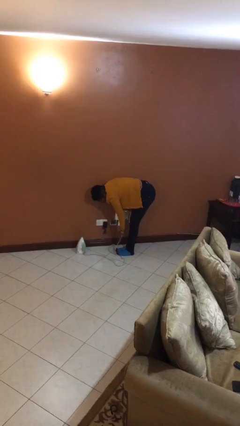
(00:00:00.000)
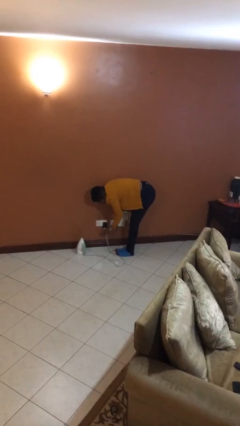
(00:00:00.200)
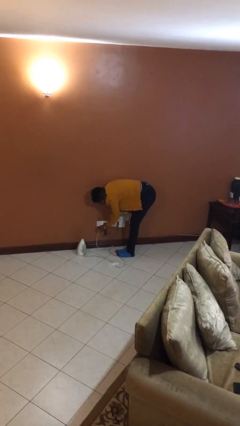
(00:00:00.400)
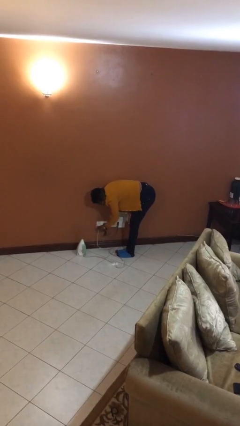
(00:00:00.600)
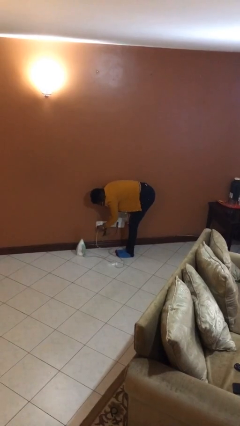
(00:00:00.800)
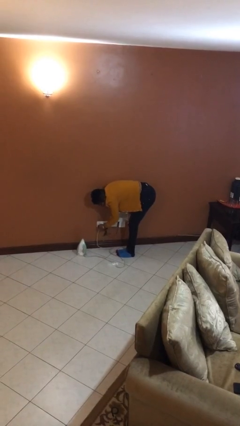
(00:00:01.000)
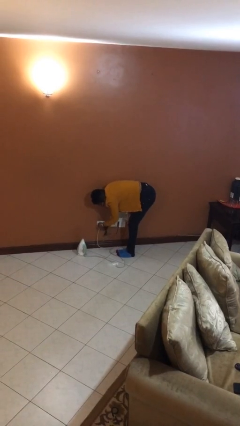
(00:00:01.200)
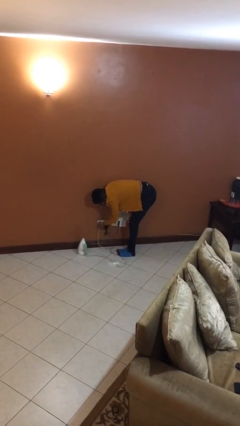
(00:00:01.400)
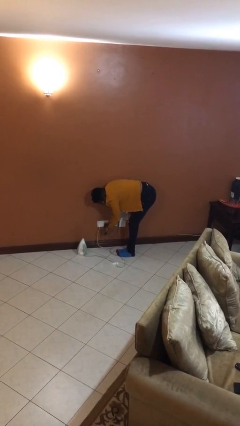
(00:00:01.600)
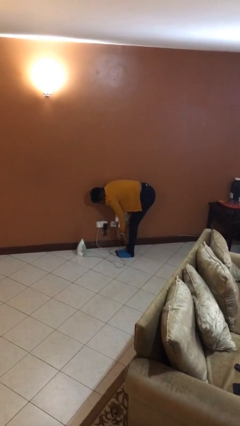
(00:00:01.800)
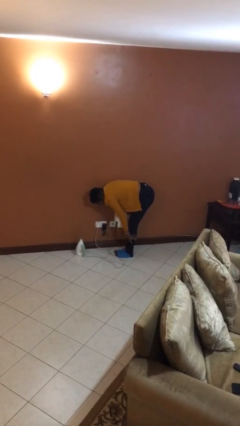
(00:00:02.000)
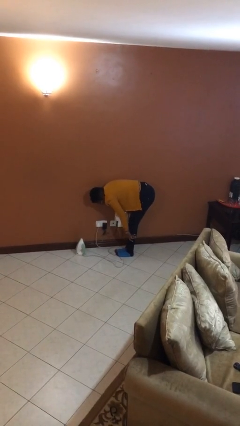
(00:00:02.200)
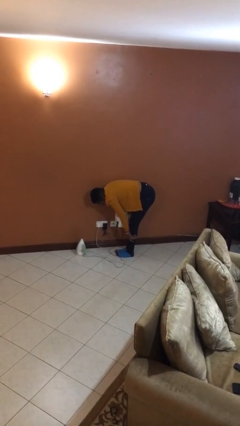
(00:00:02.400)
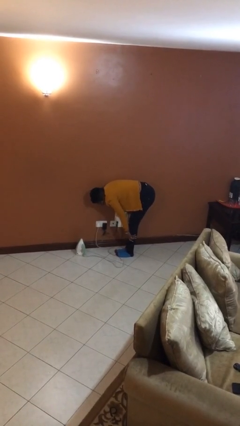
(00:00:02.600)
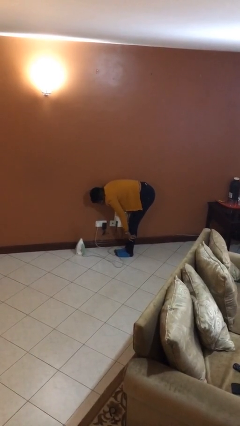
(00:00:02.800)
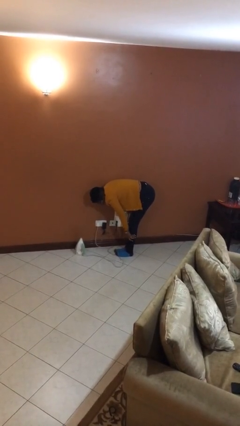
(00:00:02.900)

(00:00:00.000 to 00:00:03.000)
person plugs into electrical socket

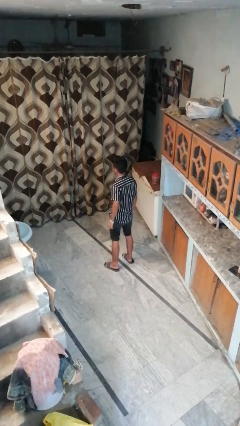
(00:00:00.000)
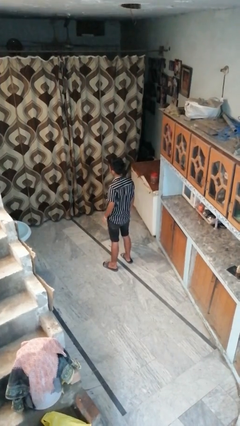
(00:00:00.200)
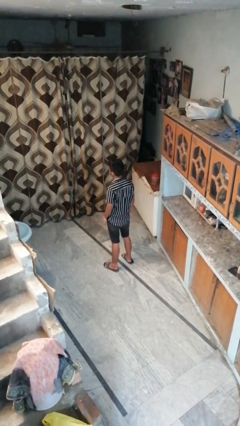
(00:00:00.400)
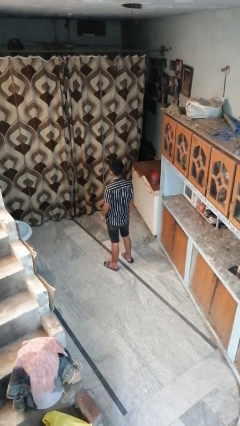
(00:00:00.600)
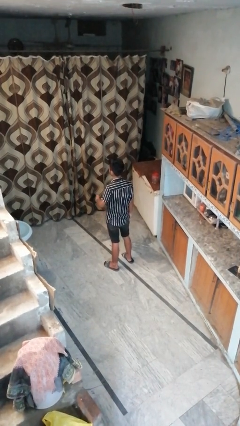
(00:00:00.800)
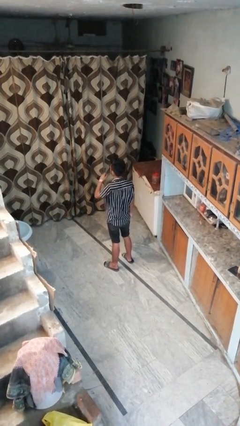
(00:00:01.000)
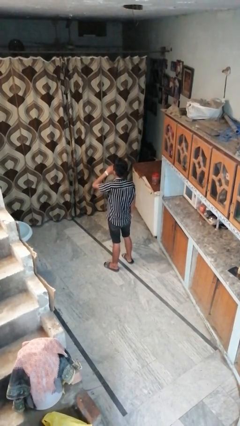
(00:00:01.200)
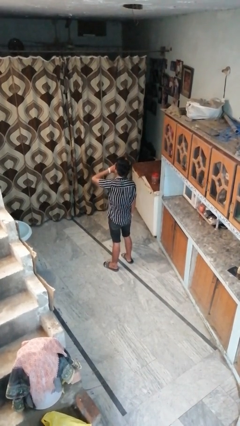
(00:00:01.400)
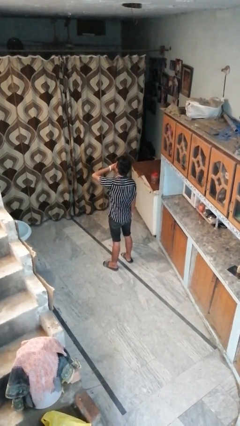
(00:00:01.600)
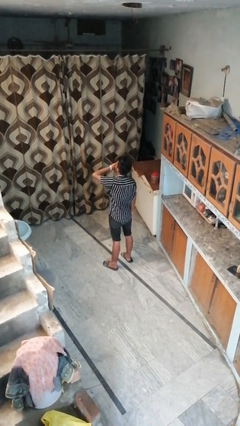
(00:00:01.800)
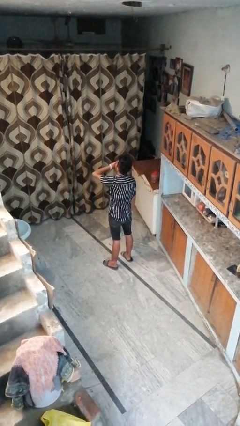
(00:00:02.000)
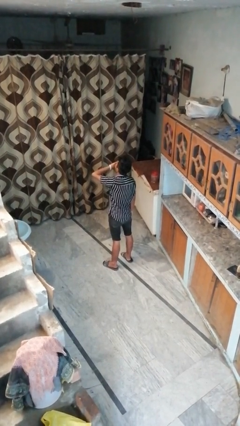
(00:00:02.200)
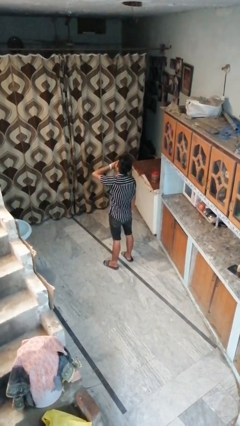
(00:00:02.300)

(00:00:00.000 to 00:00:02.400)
person yawns

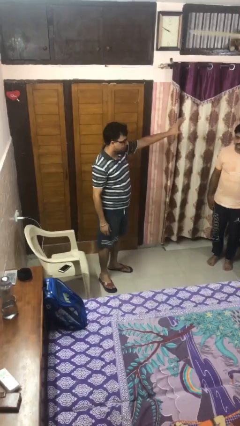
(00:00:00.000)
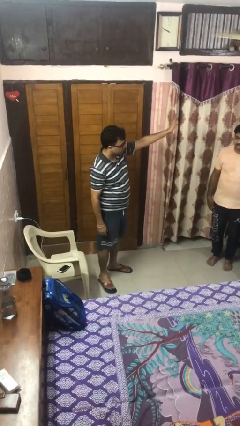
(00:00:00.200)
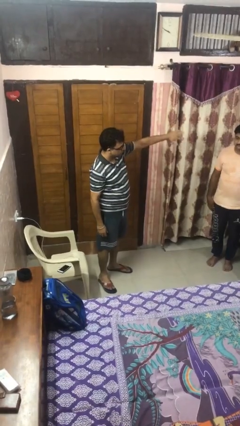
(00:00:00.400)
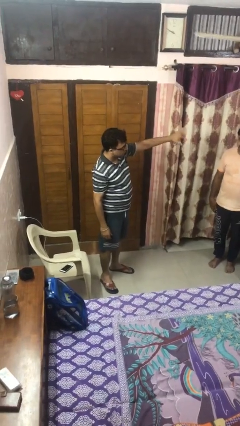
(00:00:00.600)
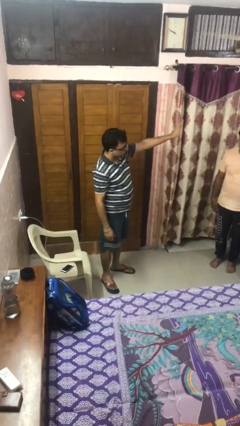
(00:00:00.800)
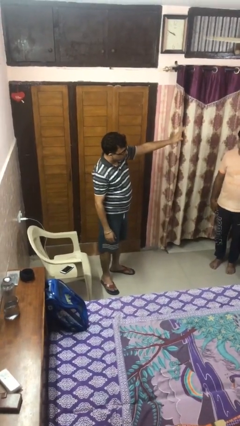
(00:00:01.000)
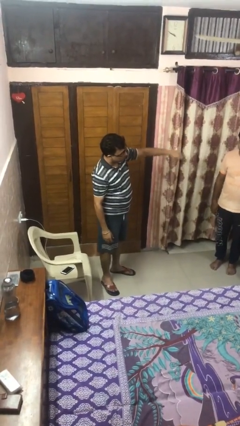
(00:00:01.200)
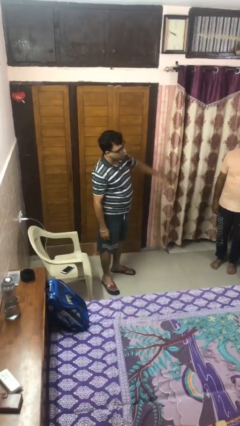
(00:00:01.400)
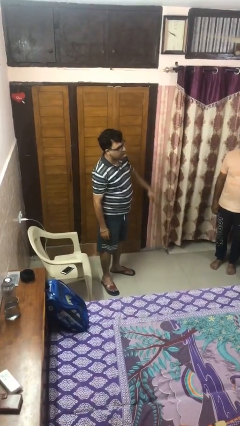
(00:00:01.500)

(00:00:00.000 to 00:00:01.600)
person waves at person

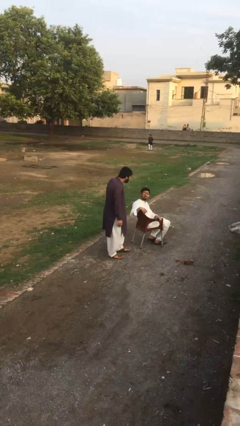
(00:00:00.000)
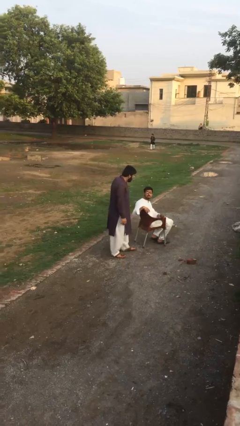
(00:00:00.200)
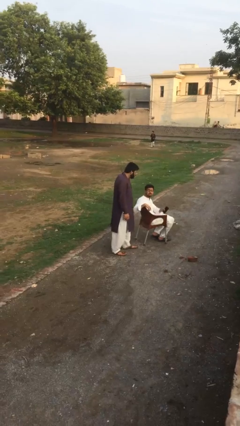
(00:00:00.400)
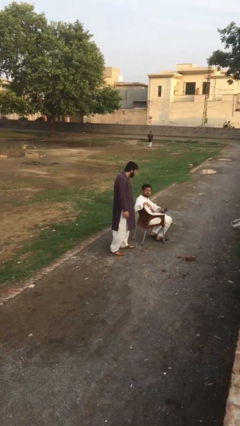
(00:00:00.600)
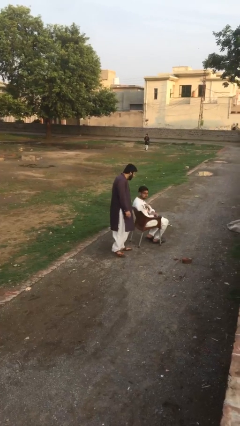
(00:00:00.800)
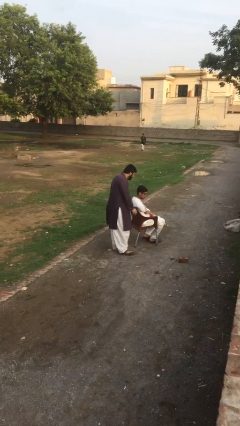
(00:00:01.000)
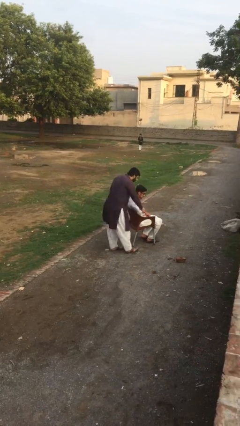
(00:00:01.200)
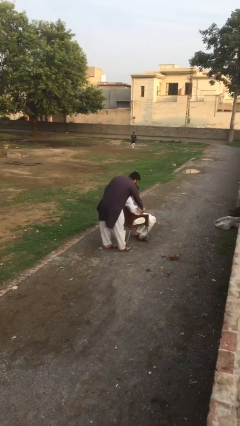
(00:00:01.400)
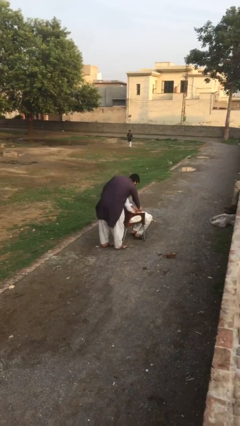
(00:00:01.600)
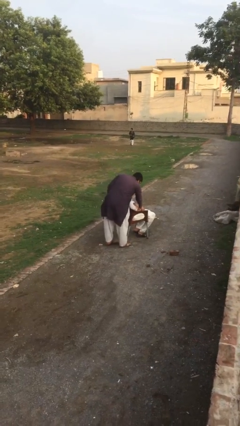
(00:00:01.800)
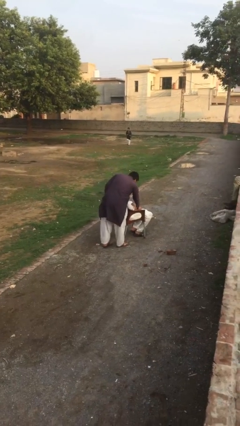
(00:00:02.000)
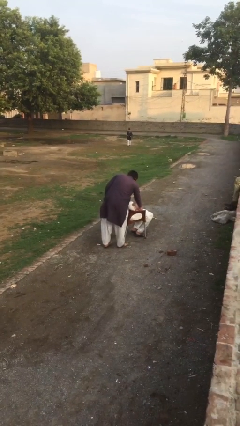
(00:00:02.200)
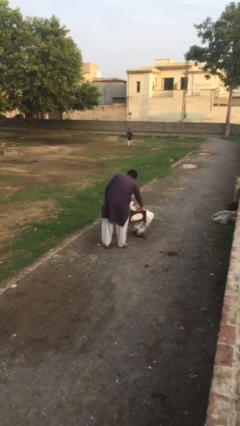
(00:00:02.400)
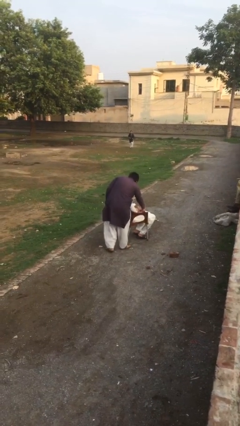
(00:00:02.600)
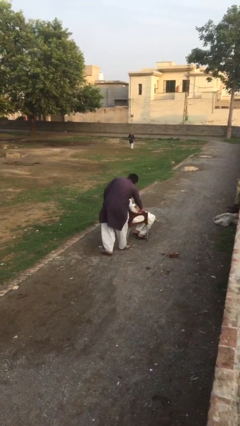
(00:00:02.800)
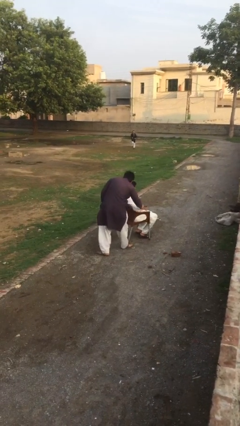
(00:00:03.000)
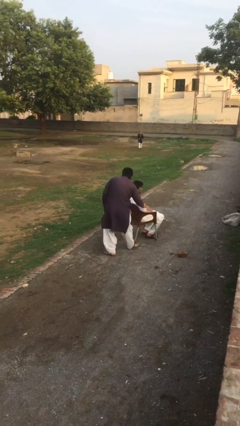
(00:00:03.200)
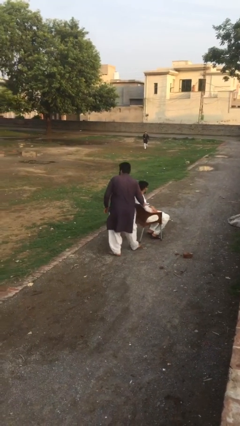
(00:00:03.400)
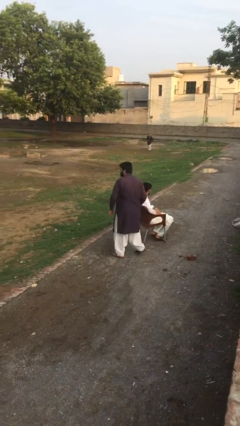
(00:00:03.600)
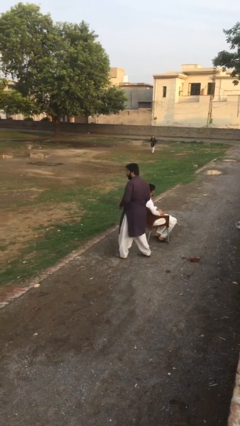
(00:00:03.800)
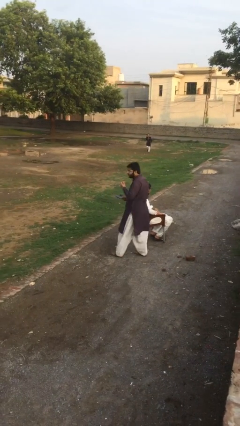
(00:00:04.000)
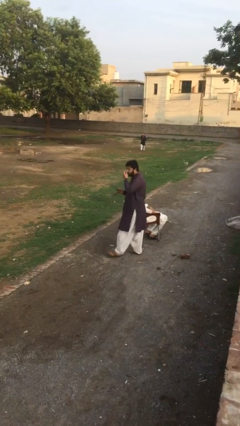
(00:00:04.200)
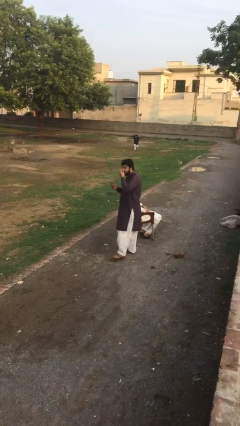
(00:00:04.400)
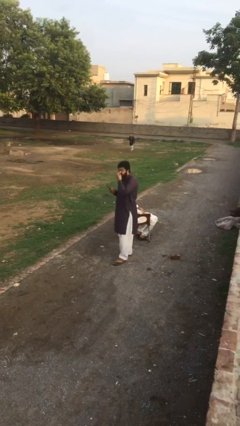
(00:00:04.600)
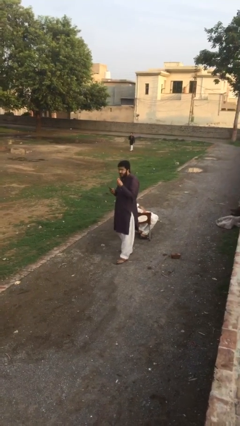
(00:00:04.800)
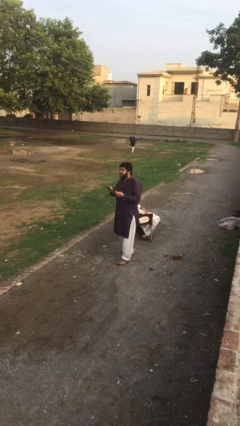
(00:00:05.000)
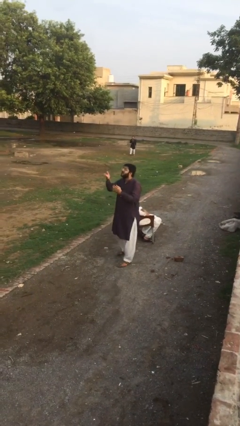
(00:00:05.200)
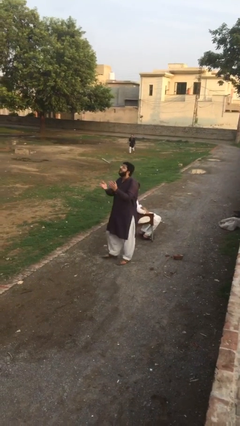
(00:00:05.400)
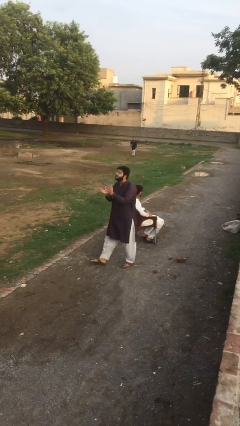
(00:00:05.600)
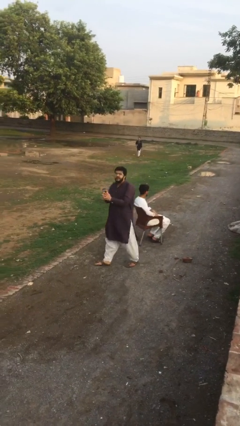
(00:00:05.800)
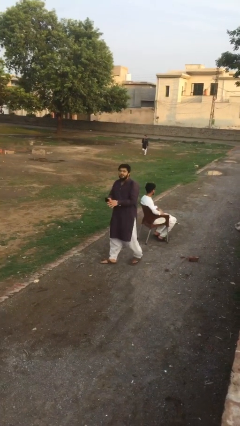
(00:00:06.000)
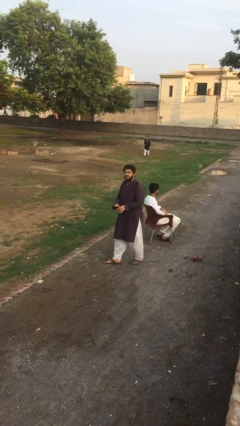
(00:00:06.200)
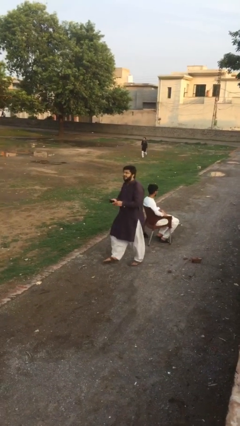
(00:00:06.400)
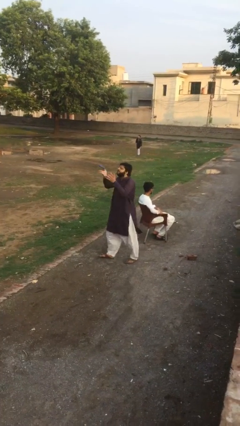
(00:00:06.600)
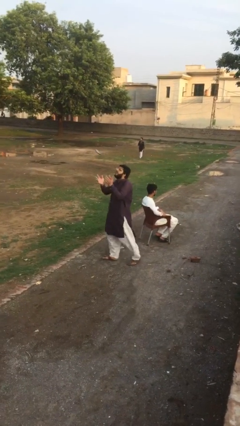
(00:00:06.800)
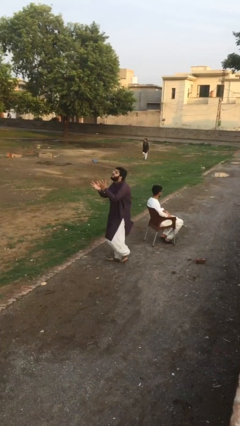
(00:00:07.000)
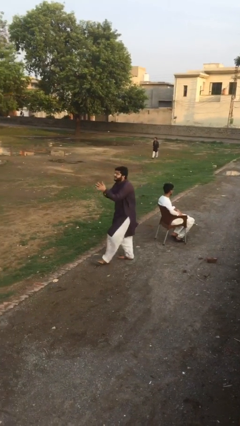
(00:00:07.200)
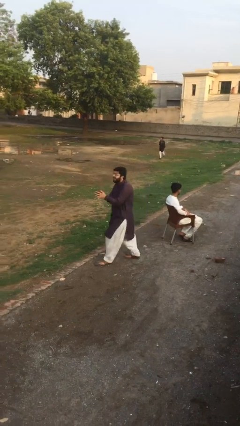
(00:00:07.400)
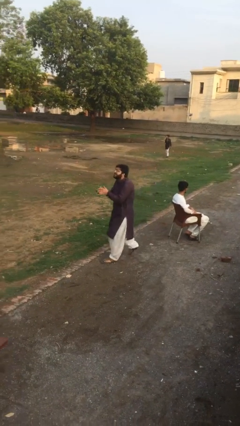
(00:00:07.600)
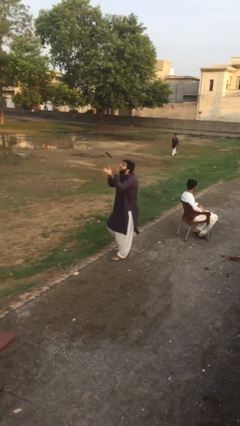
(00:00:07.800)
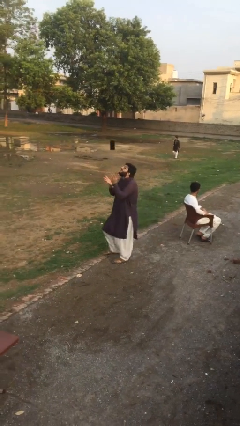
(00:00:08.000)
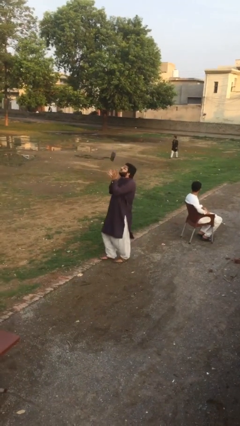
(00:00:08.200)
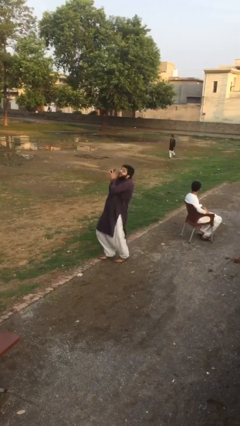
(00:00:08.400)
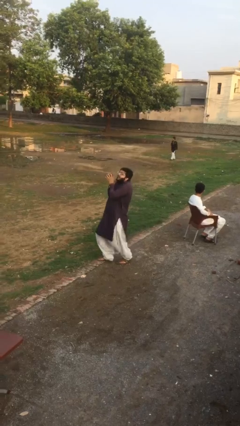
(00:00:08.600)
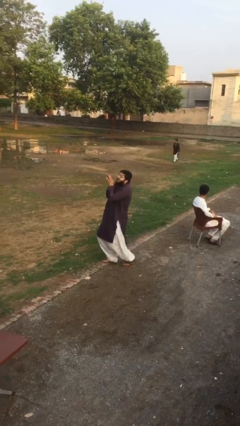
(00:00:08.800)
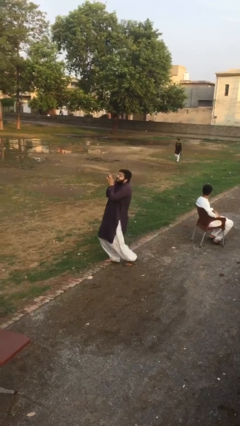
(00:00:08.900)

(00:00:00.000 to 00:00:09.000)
person steals object from person

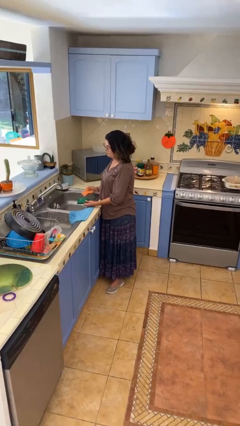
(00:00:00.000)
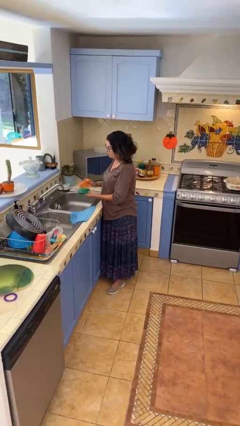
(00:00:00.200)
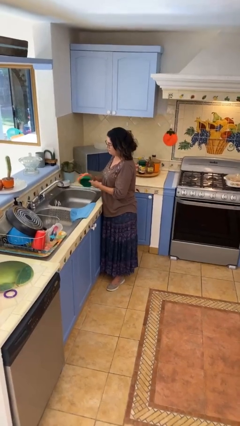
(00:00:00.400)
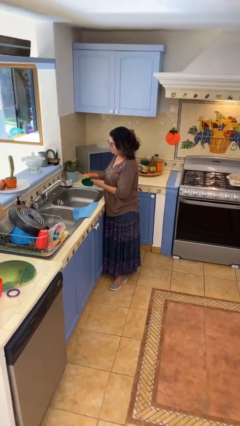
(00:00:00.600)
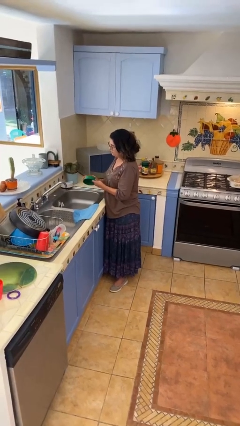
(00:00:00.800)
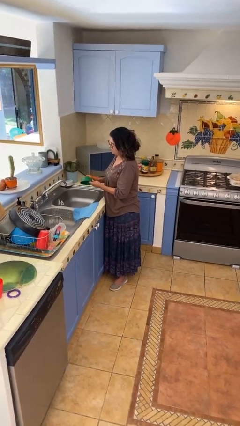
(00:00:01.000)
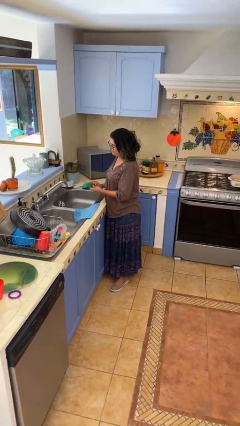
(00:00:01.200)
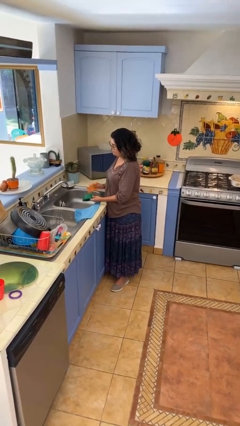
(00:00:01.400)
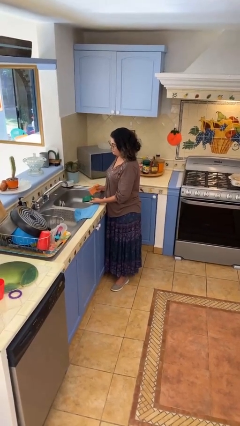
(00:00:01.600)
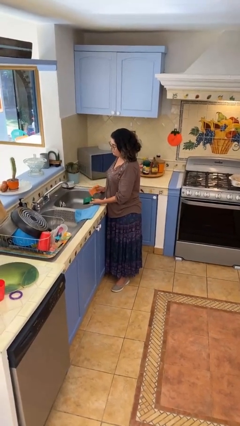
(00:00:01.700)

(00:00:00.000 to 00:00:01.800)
person washes dish
